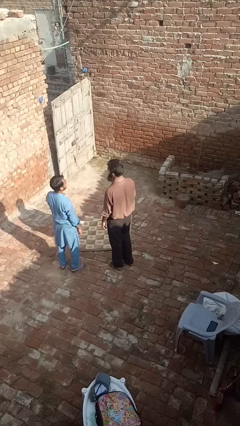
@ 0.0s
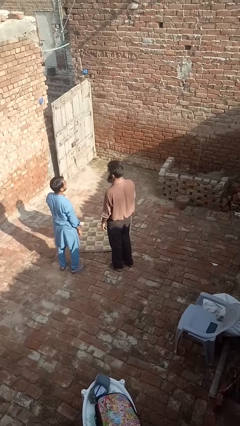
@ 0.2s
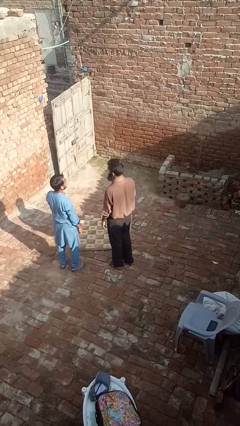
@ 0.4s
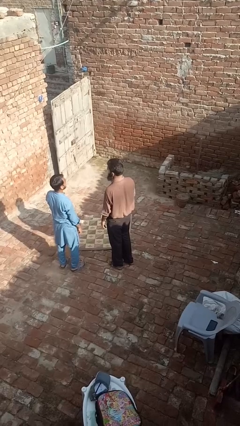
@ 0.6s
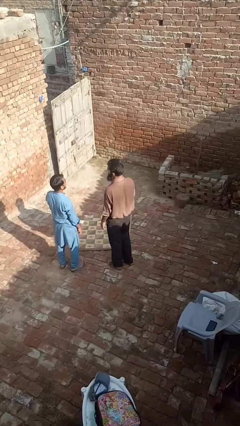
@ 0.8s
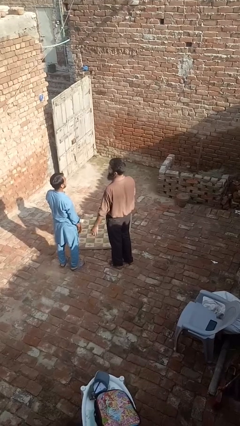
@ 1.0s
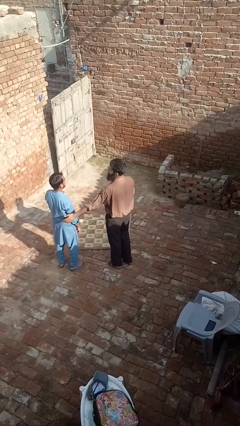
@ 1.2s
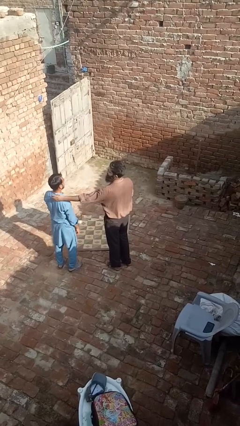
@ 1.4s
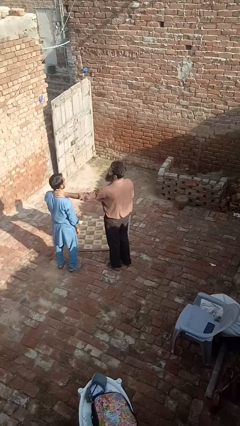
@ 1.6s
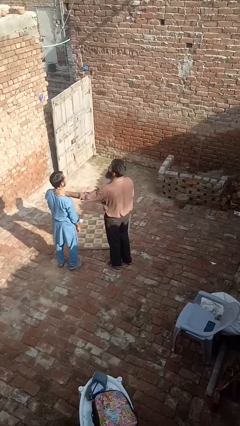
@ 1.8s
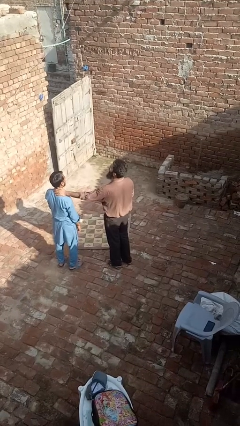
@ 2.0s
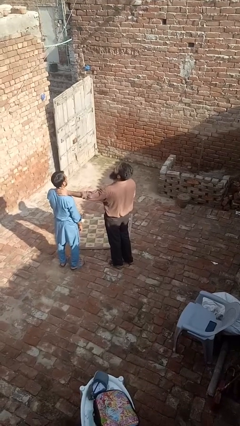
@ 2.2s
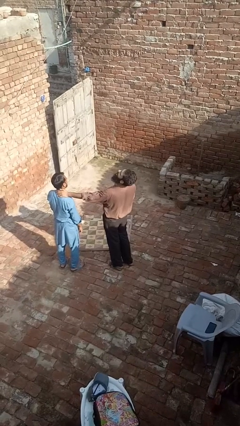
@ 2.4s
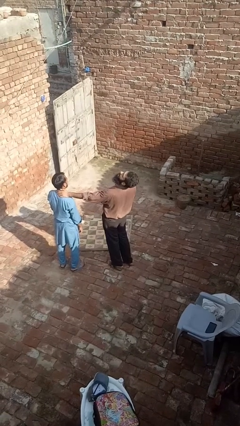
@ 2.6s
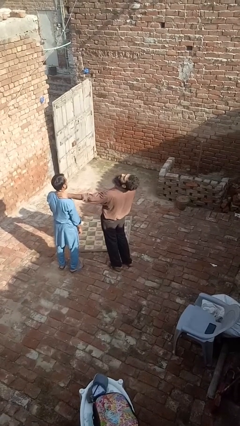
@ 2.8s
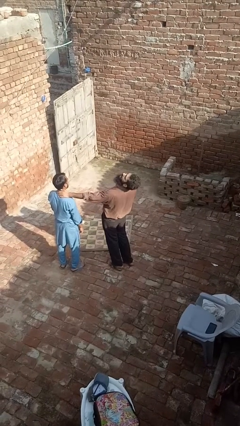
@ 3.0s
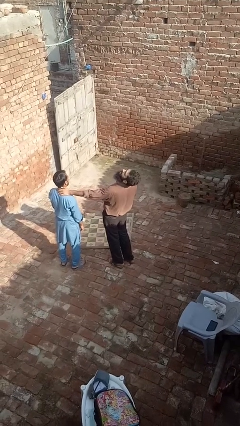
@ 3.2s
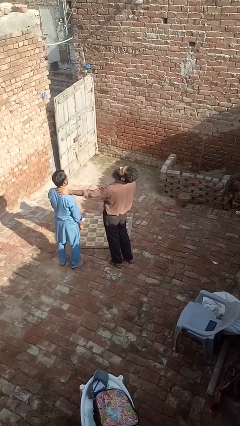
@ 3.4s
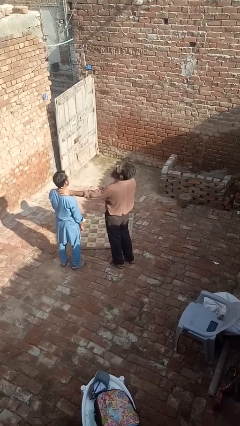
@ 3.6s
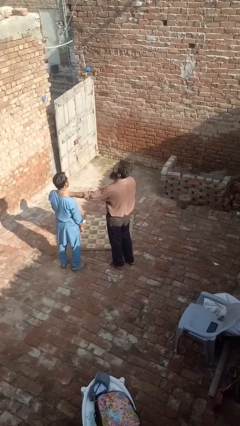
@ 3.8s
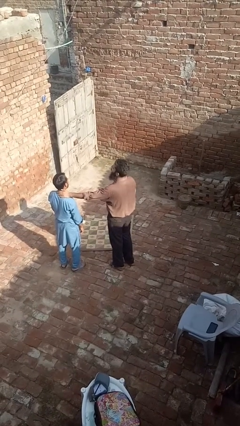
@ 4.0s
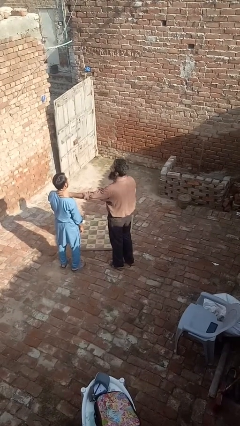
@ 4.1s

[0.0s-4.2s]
person laughs with person

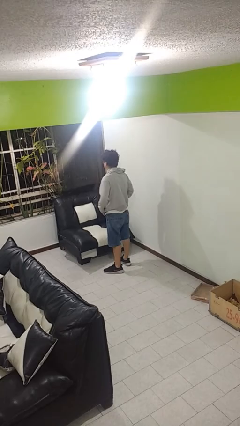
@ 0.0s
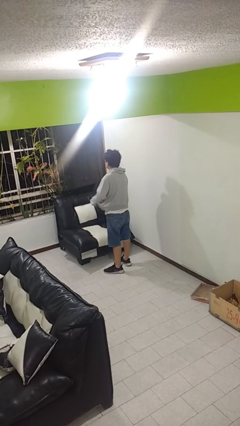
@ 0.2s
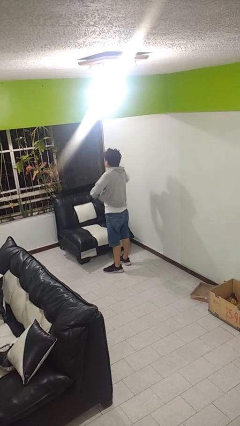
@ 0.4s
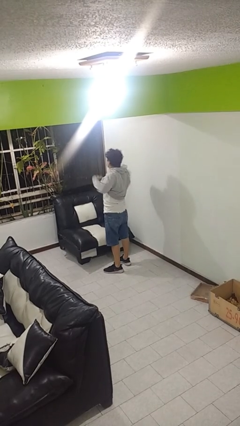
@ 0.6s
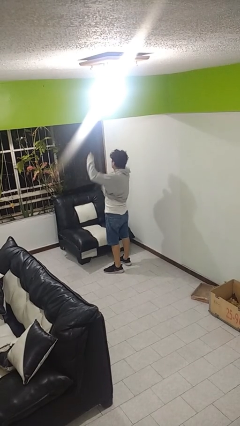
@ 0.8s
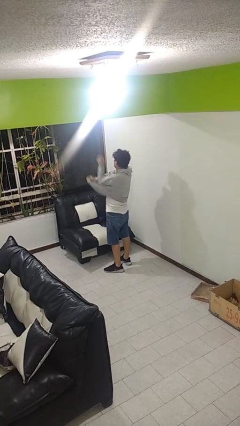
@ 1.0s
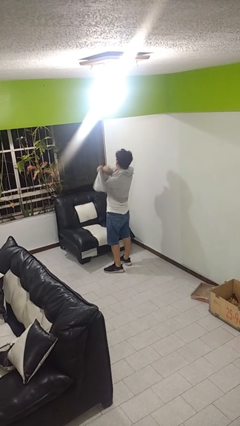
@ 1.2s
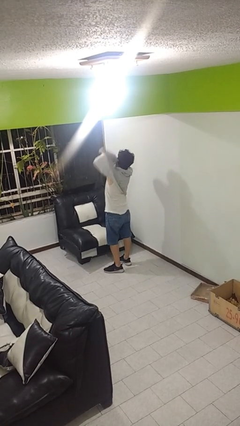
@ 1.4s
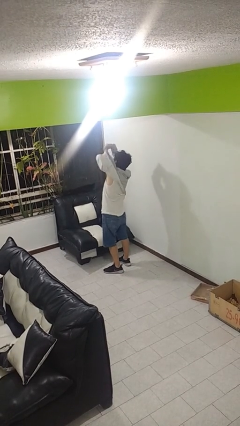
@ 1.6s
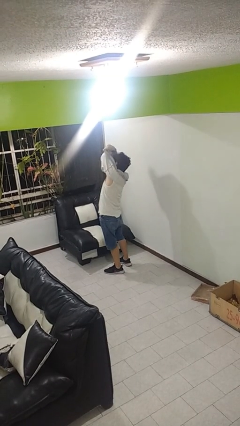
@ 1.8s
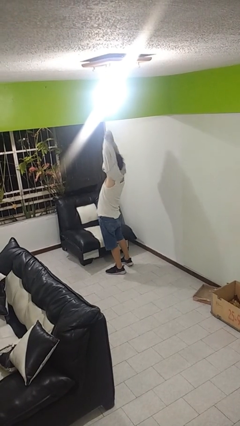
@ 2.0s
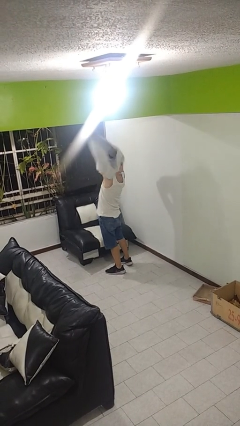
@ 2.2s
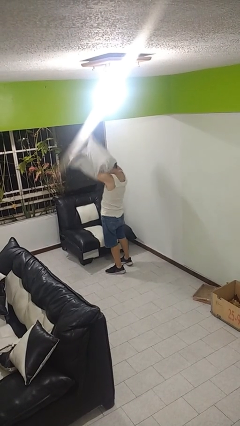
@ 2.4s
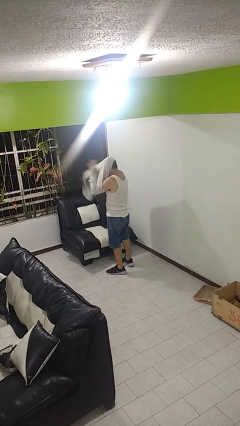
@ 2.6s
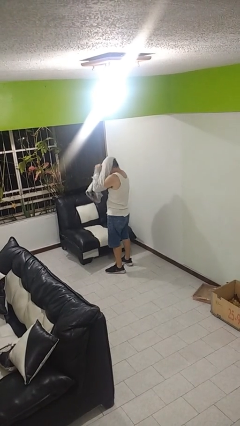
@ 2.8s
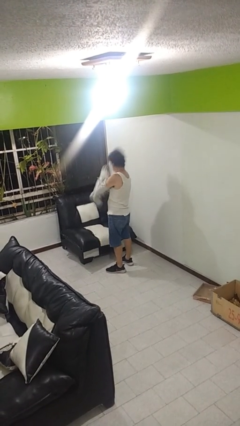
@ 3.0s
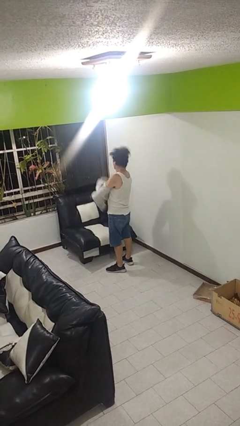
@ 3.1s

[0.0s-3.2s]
person takes off hoodie

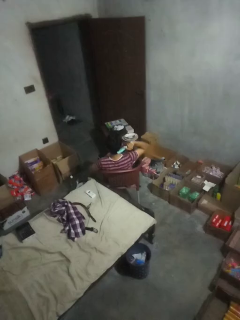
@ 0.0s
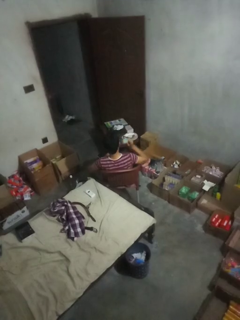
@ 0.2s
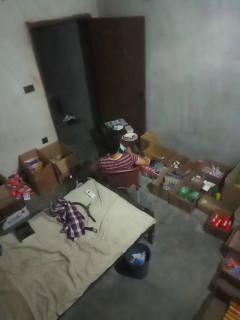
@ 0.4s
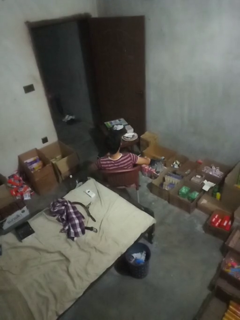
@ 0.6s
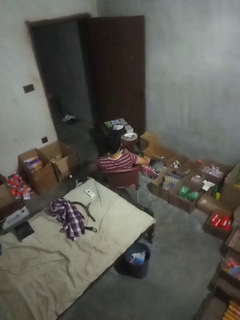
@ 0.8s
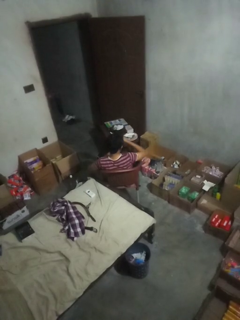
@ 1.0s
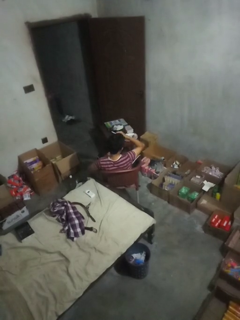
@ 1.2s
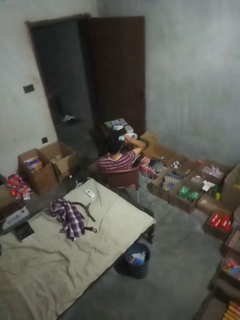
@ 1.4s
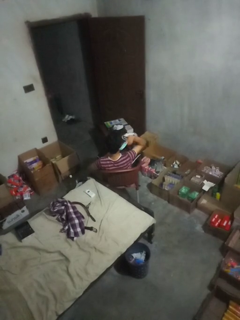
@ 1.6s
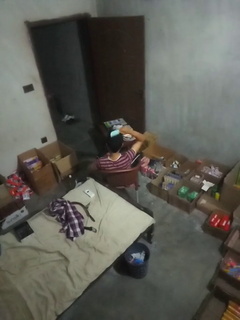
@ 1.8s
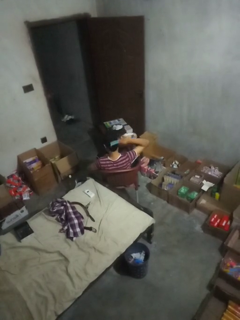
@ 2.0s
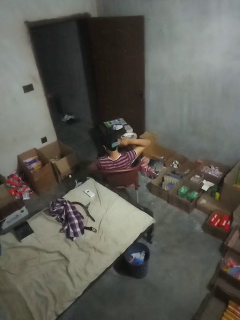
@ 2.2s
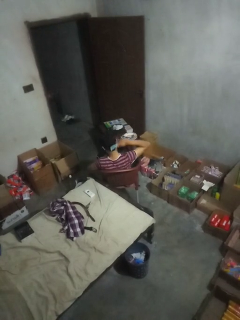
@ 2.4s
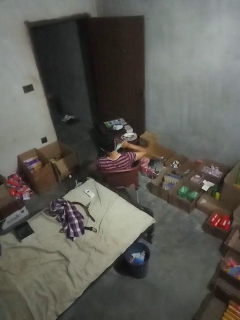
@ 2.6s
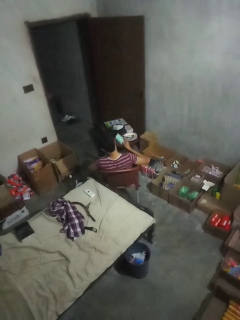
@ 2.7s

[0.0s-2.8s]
person brushes hair

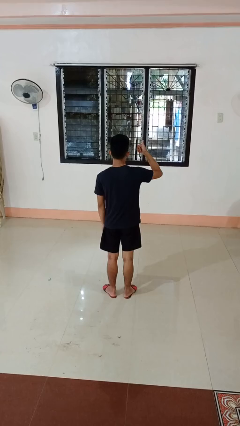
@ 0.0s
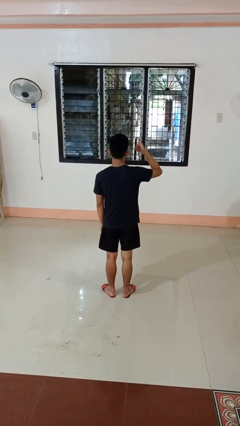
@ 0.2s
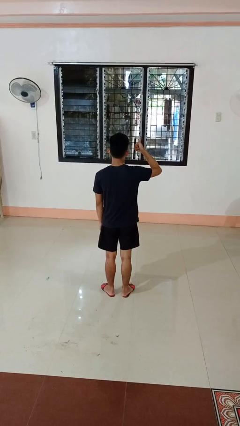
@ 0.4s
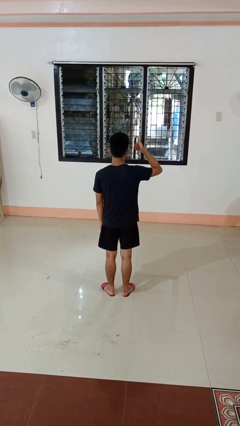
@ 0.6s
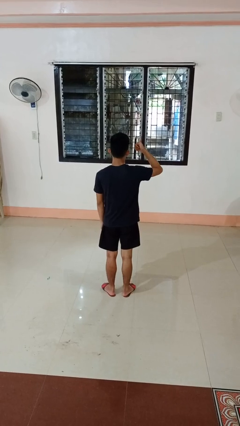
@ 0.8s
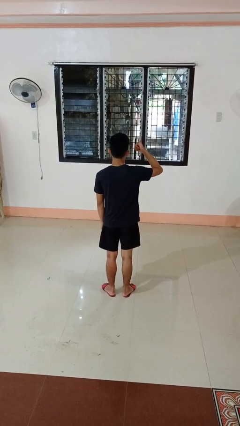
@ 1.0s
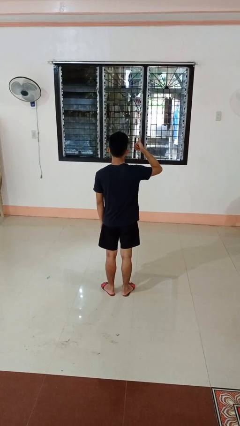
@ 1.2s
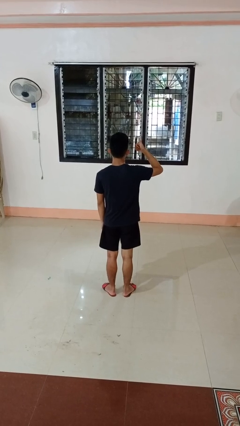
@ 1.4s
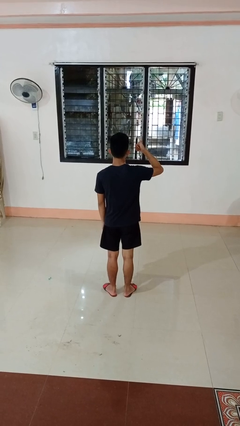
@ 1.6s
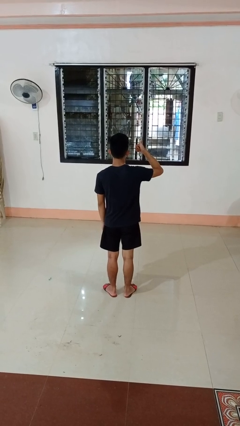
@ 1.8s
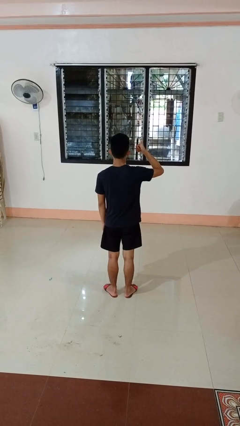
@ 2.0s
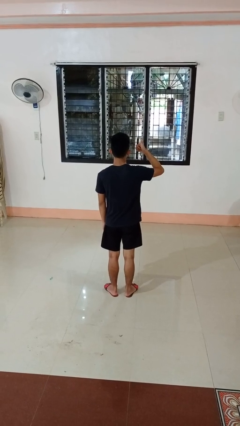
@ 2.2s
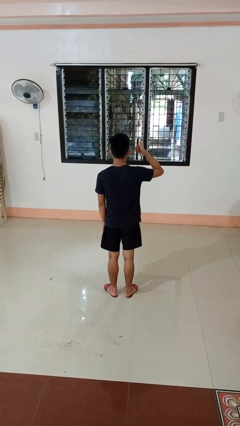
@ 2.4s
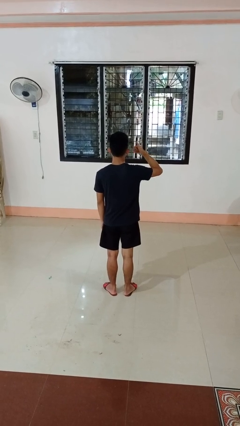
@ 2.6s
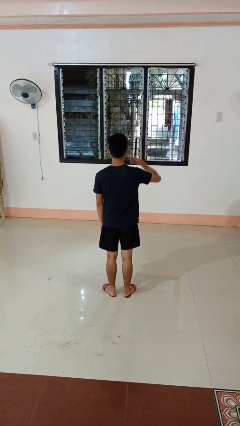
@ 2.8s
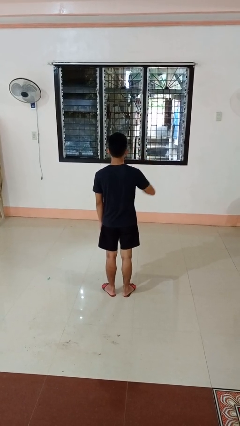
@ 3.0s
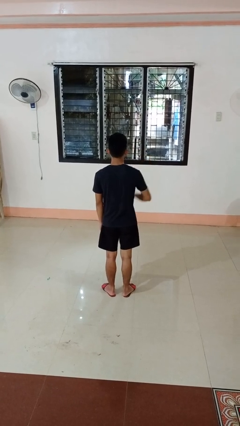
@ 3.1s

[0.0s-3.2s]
person gestures thumbs up

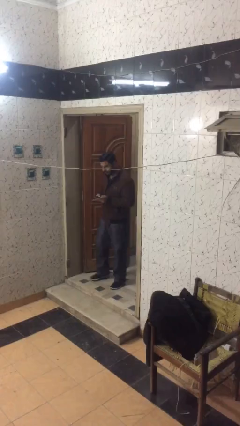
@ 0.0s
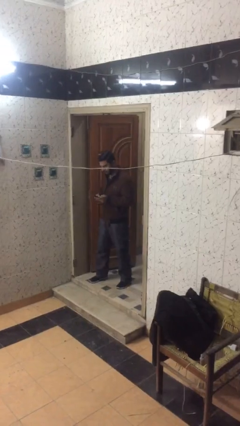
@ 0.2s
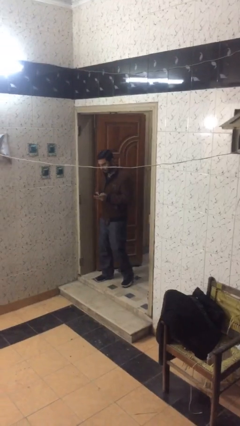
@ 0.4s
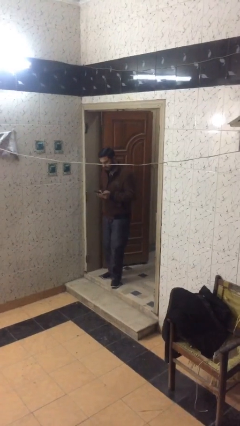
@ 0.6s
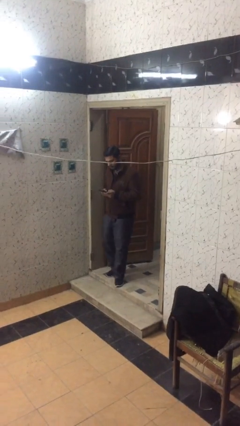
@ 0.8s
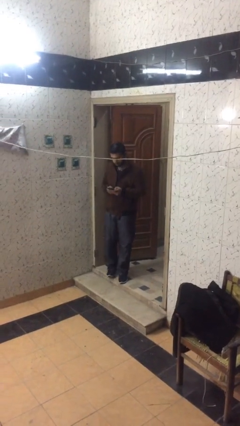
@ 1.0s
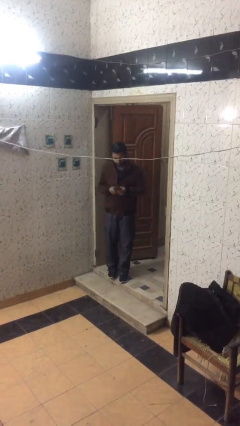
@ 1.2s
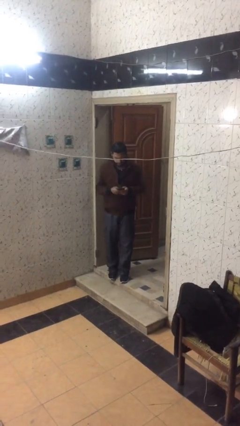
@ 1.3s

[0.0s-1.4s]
person enters scene through structure

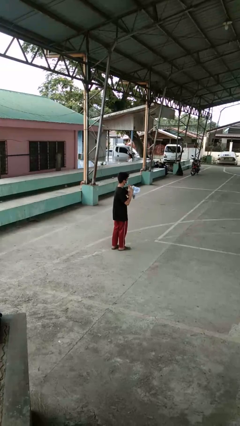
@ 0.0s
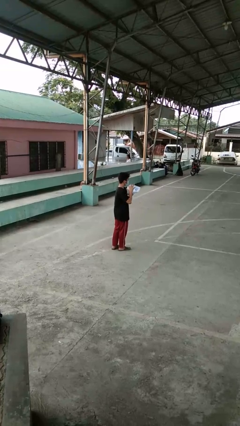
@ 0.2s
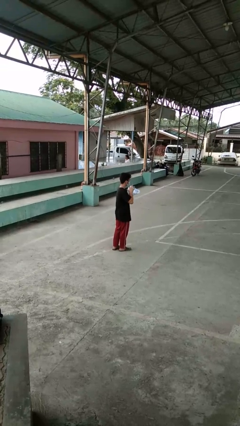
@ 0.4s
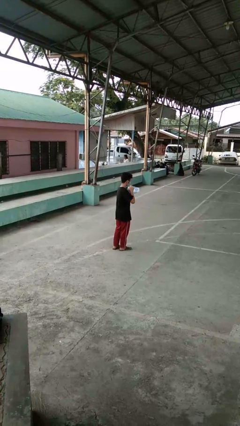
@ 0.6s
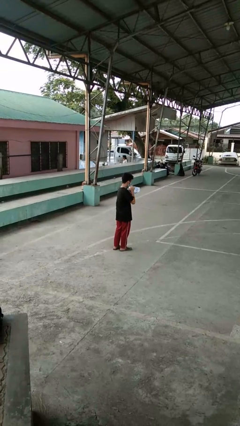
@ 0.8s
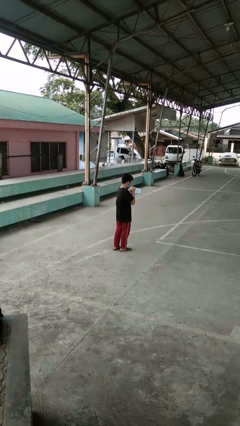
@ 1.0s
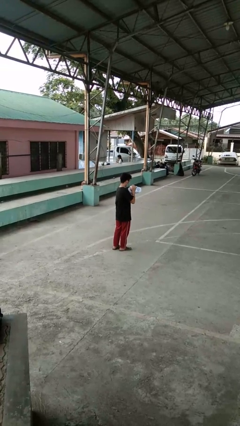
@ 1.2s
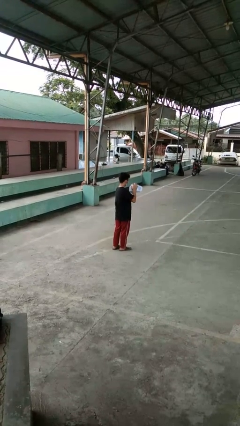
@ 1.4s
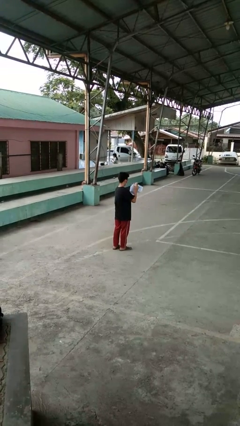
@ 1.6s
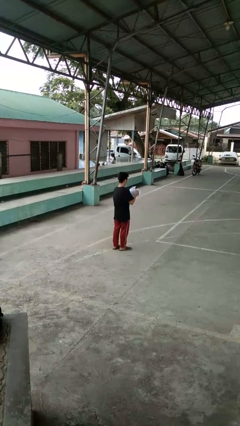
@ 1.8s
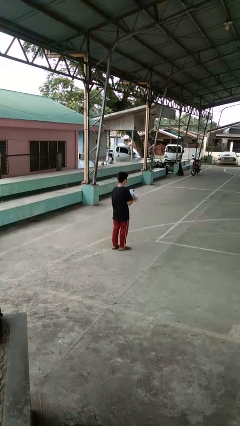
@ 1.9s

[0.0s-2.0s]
person squeezes object

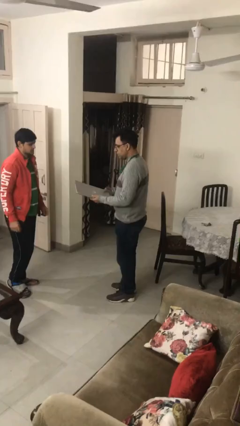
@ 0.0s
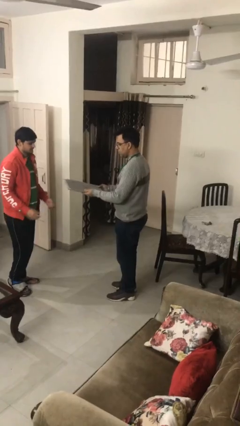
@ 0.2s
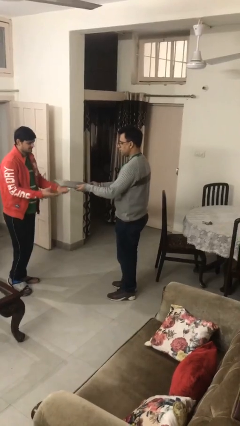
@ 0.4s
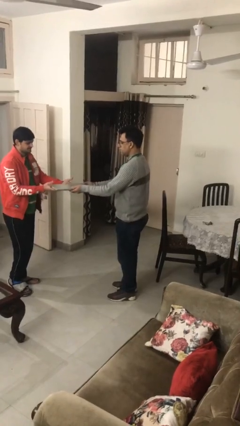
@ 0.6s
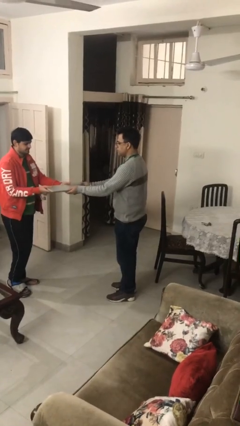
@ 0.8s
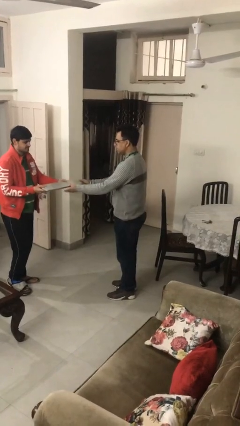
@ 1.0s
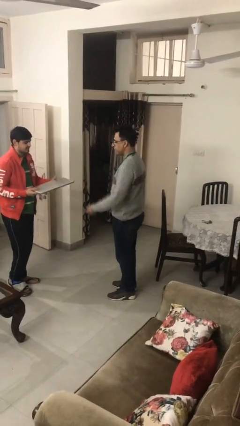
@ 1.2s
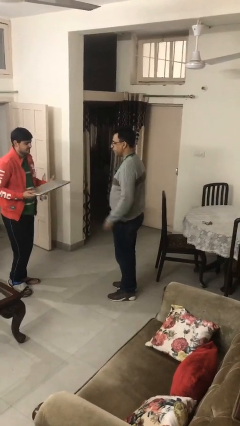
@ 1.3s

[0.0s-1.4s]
person transfers object to person

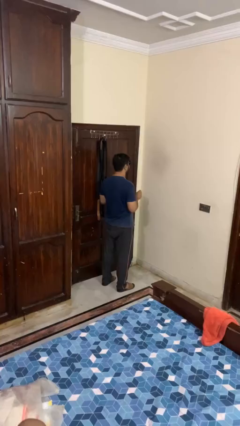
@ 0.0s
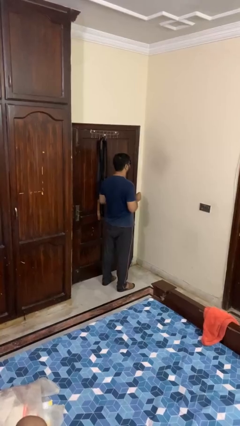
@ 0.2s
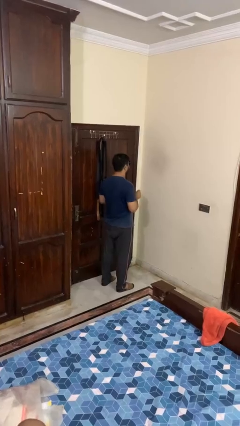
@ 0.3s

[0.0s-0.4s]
person takes off sunglasses
